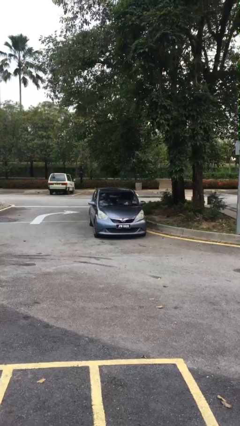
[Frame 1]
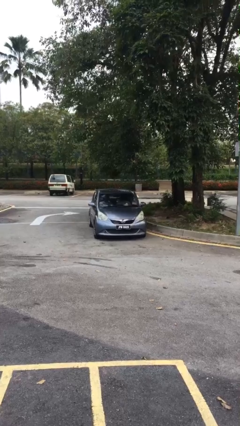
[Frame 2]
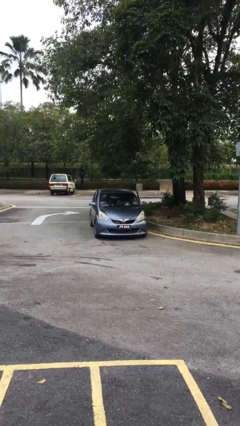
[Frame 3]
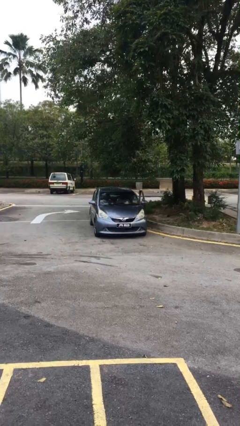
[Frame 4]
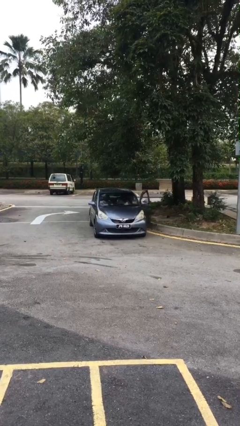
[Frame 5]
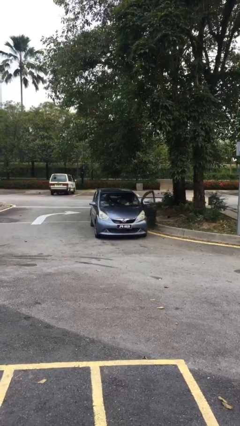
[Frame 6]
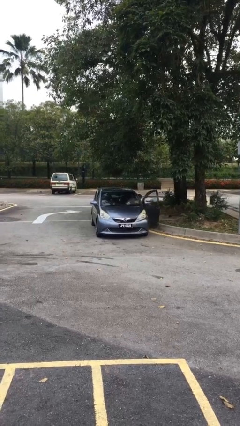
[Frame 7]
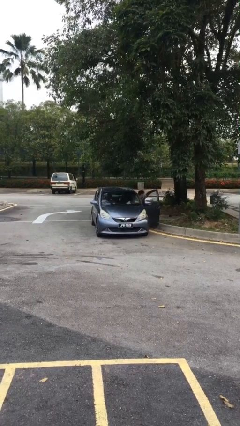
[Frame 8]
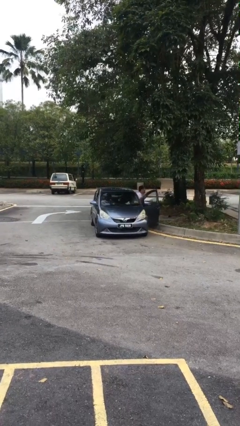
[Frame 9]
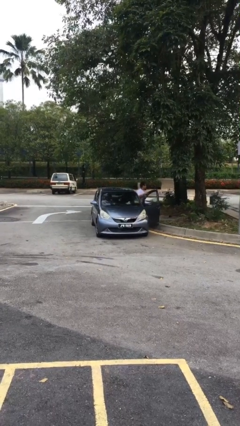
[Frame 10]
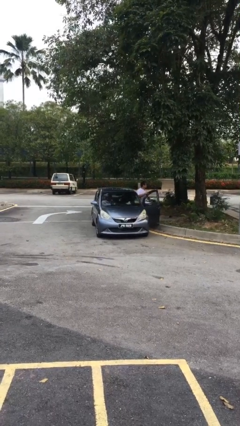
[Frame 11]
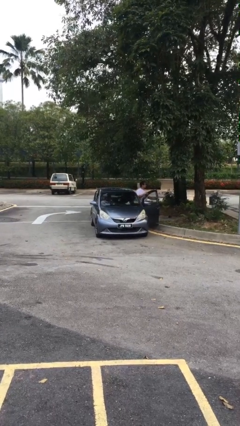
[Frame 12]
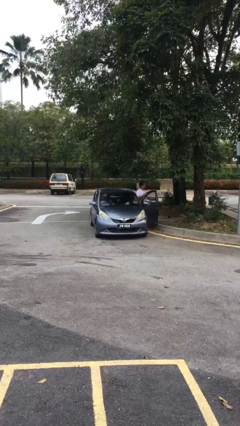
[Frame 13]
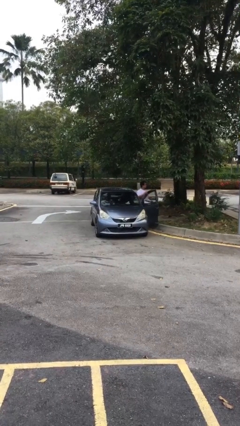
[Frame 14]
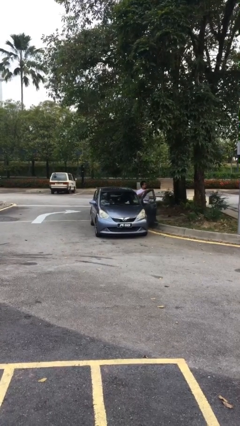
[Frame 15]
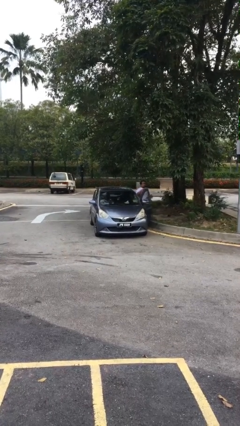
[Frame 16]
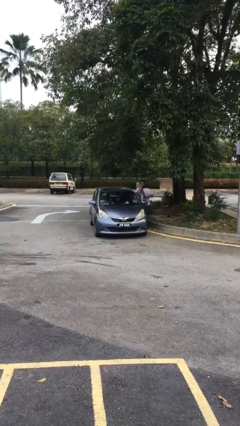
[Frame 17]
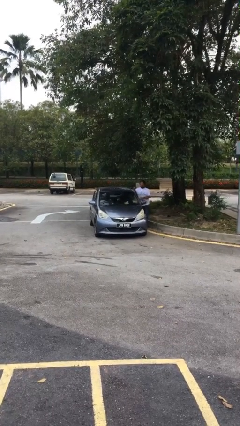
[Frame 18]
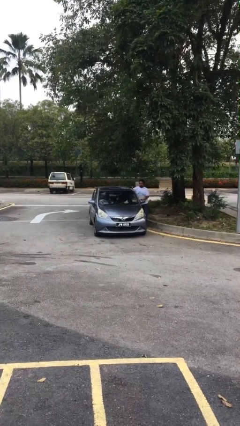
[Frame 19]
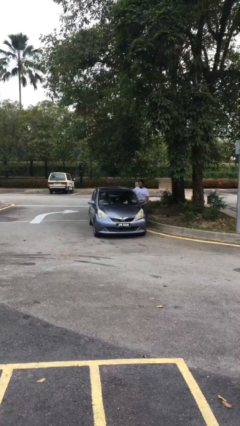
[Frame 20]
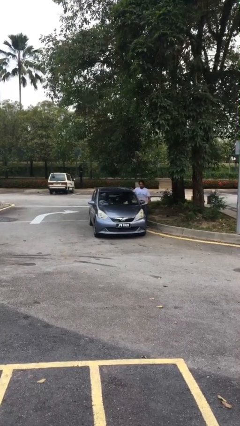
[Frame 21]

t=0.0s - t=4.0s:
car drops off person

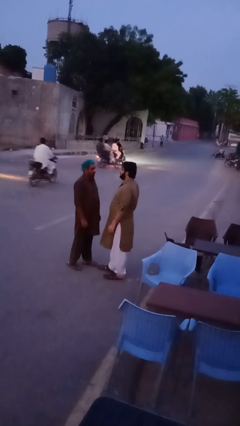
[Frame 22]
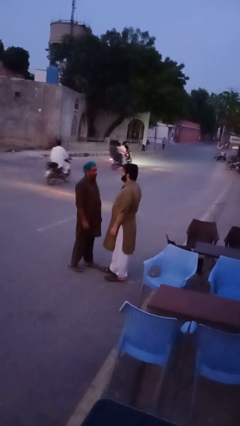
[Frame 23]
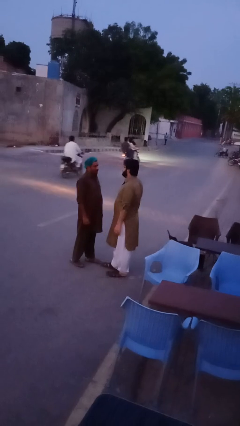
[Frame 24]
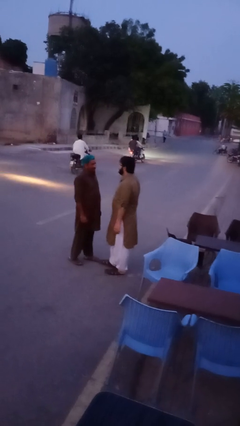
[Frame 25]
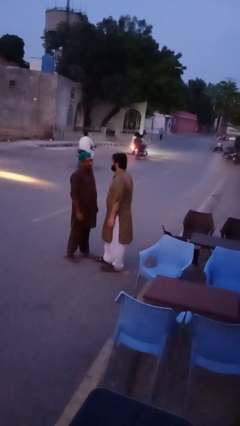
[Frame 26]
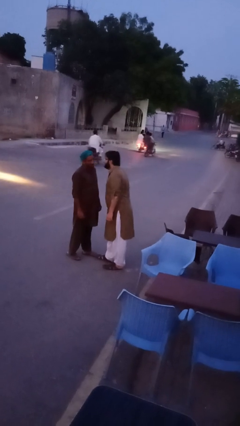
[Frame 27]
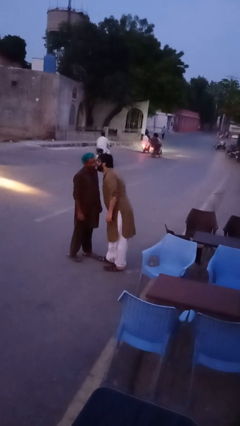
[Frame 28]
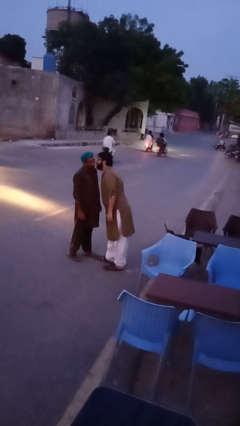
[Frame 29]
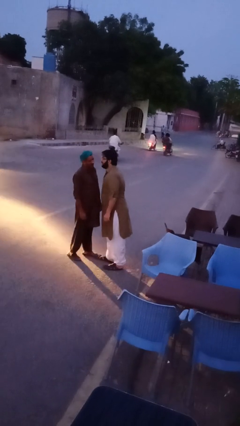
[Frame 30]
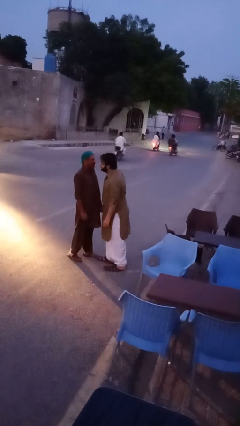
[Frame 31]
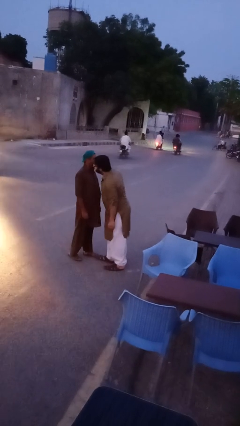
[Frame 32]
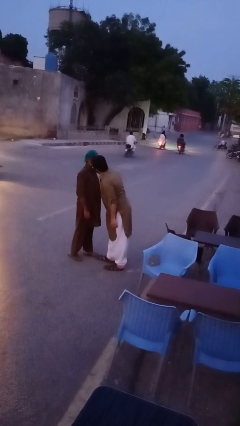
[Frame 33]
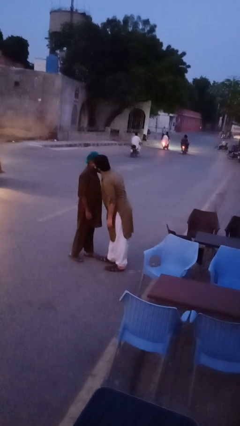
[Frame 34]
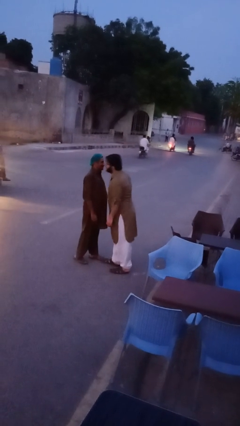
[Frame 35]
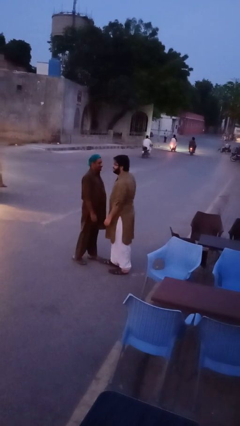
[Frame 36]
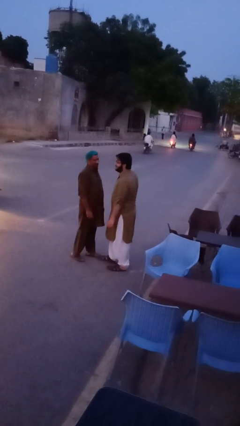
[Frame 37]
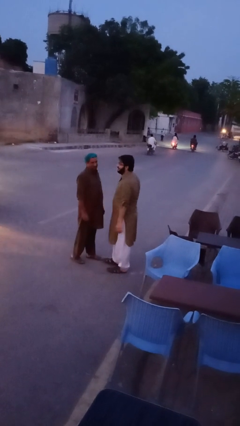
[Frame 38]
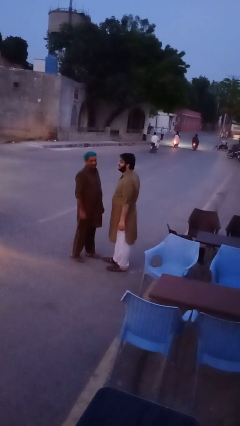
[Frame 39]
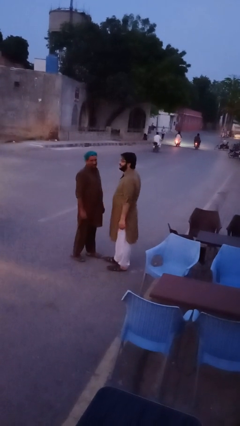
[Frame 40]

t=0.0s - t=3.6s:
person kisses cheek of person

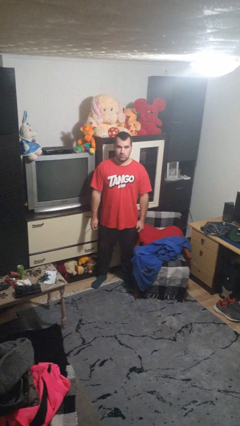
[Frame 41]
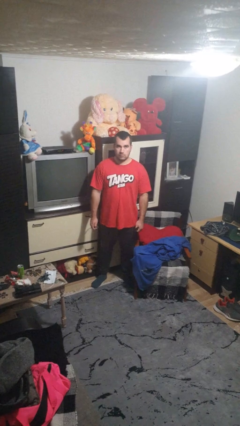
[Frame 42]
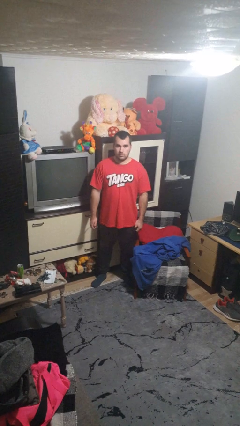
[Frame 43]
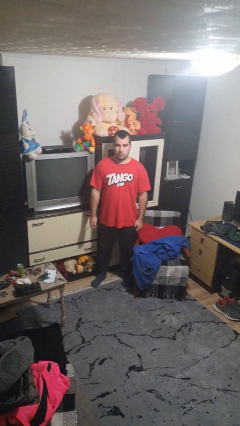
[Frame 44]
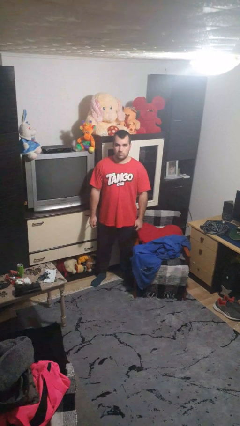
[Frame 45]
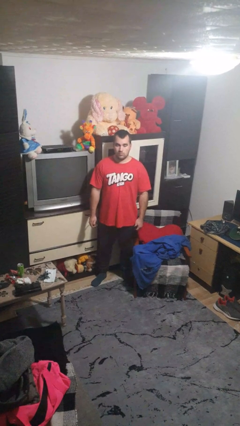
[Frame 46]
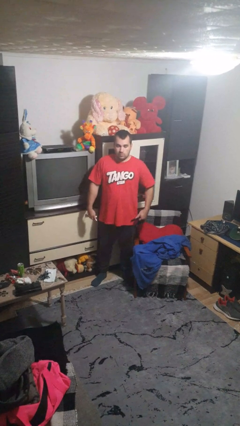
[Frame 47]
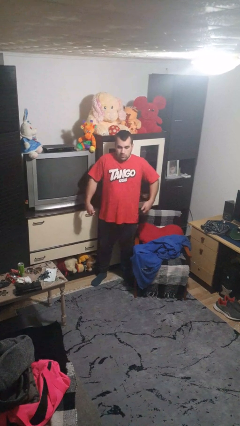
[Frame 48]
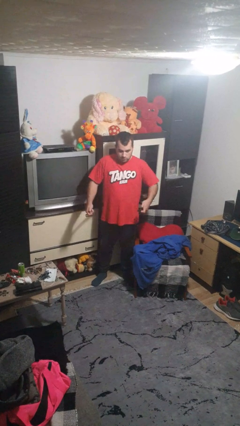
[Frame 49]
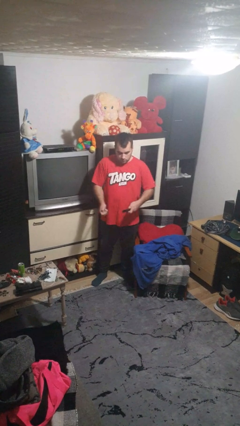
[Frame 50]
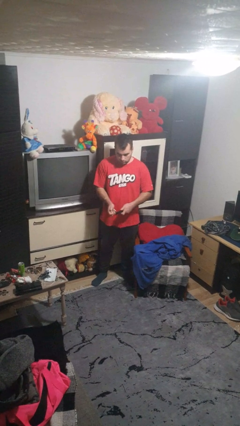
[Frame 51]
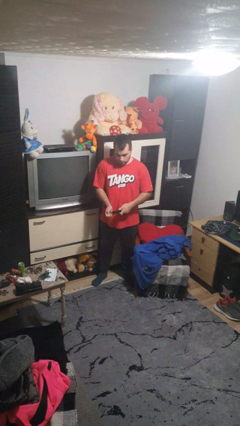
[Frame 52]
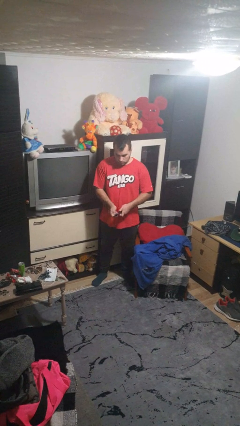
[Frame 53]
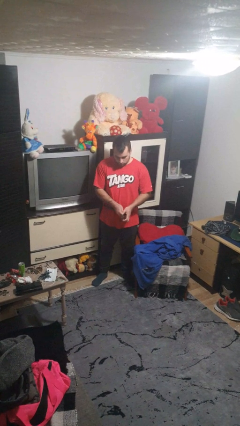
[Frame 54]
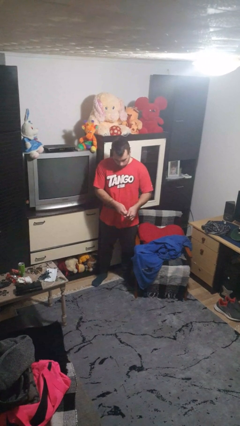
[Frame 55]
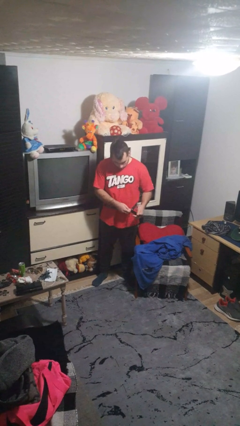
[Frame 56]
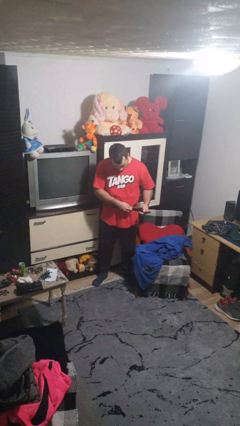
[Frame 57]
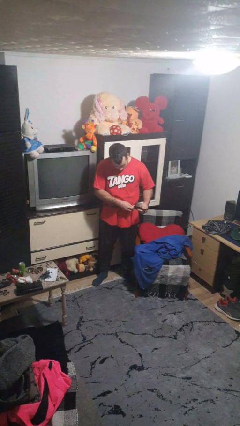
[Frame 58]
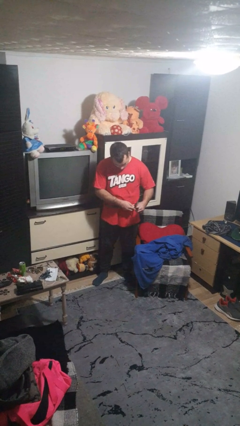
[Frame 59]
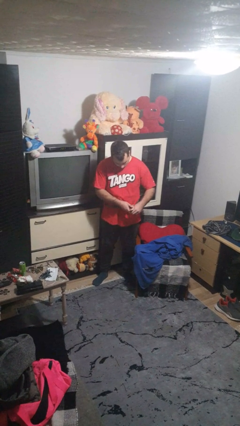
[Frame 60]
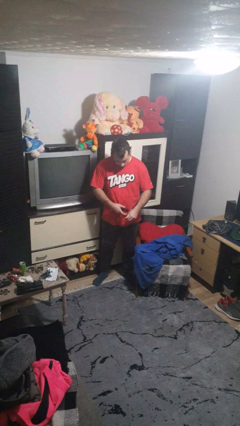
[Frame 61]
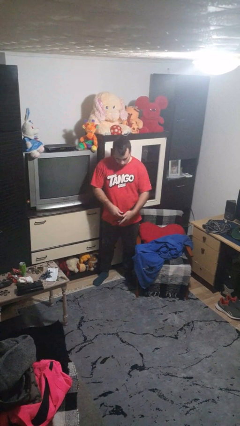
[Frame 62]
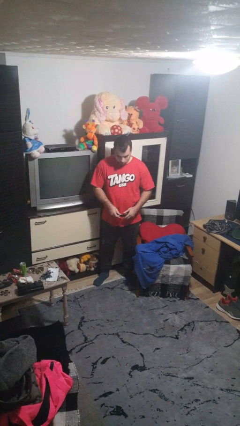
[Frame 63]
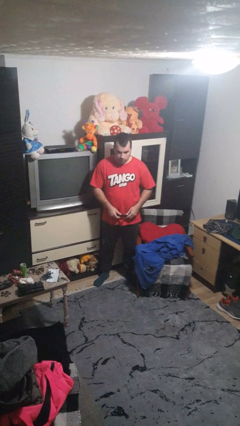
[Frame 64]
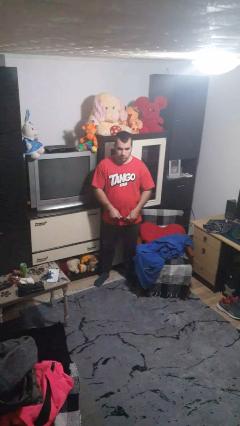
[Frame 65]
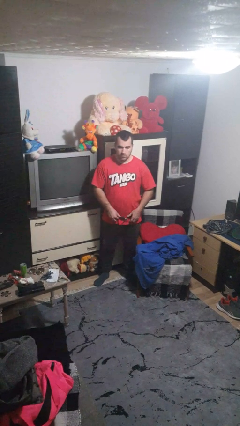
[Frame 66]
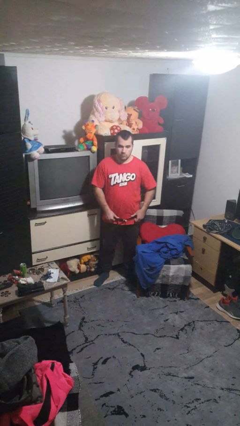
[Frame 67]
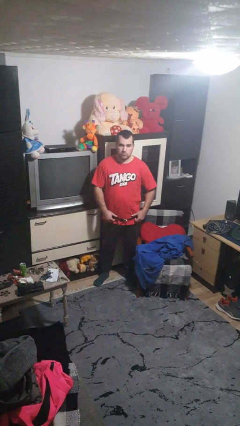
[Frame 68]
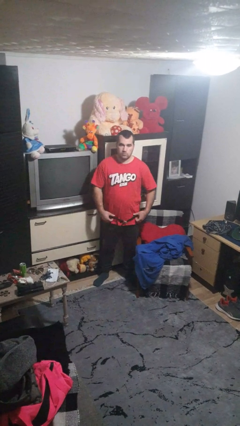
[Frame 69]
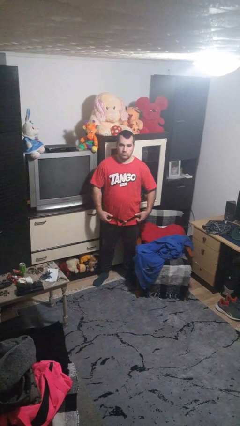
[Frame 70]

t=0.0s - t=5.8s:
person puts on belt

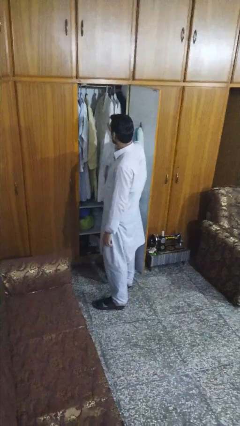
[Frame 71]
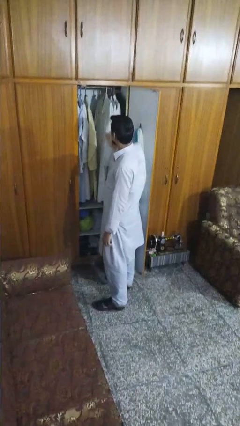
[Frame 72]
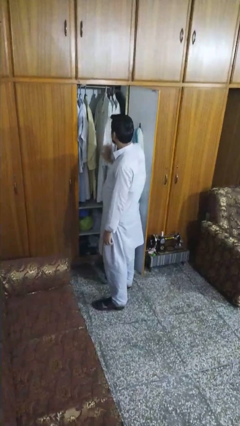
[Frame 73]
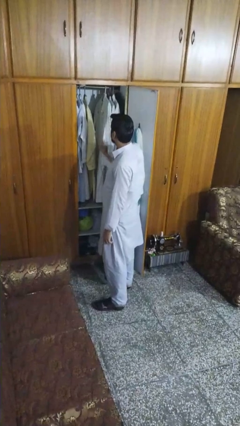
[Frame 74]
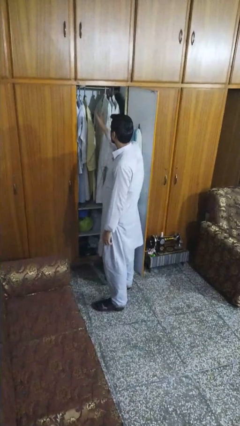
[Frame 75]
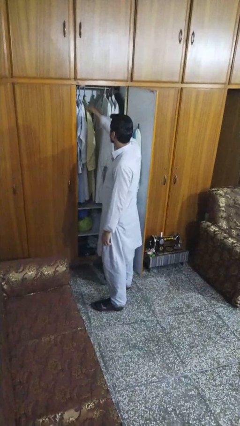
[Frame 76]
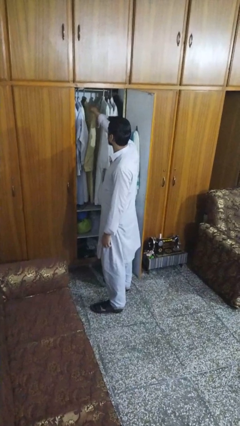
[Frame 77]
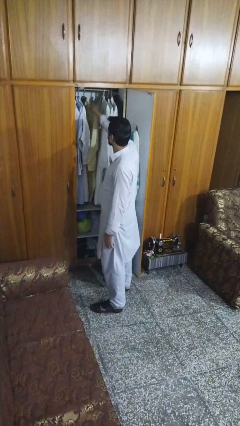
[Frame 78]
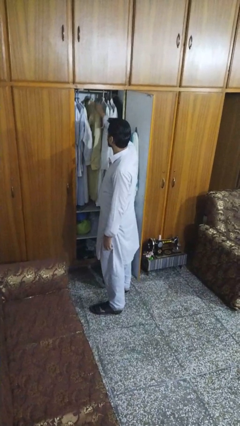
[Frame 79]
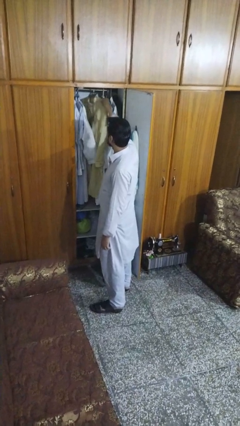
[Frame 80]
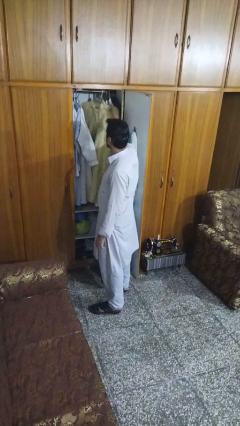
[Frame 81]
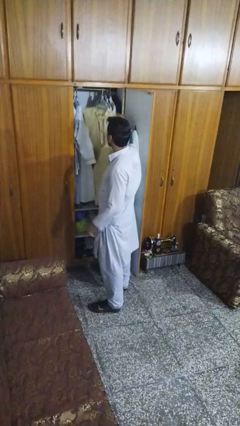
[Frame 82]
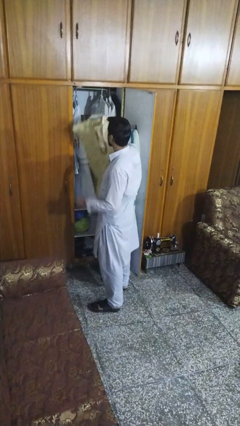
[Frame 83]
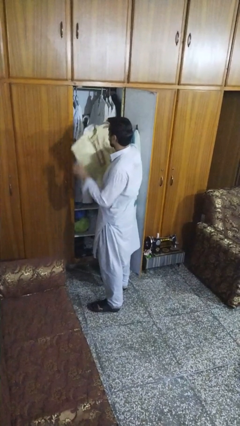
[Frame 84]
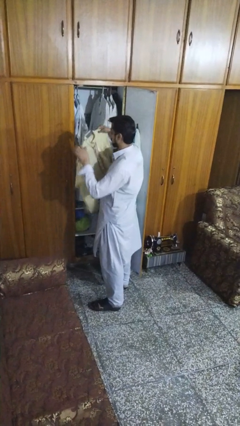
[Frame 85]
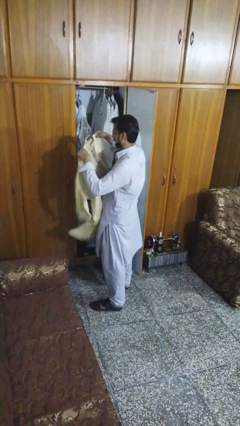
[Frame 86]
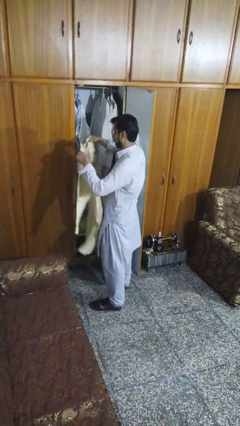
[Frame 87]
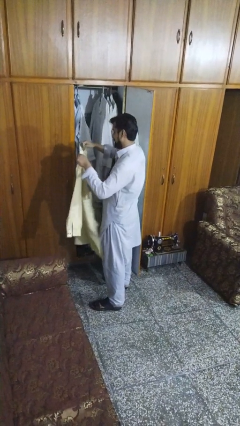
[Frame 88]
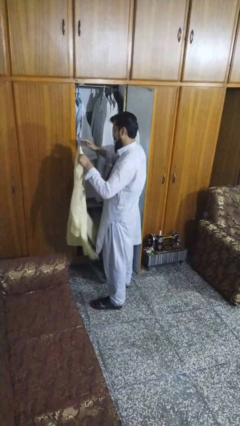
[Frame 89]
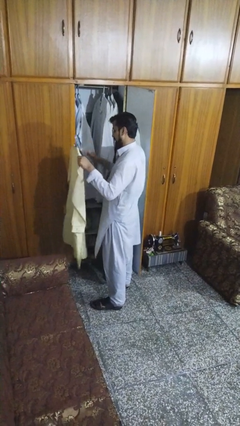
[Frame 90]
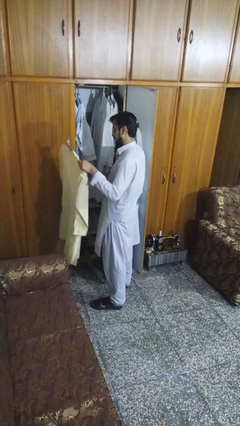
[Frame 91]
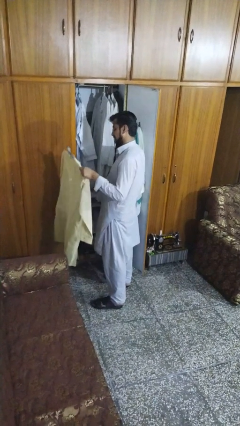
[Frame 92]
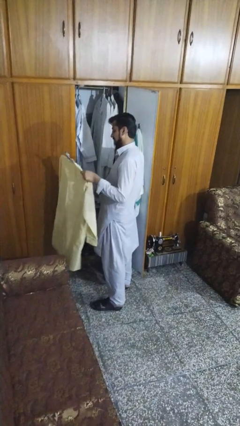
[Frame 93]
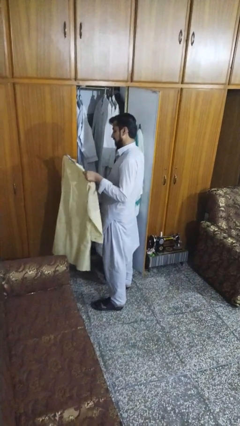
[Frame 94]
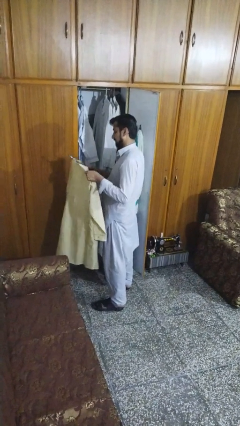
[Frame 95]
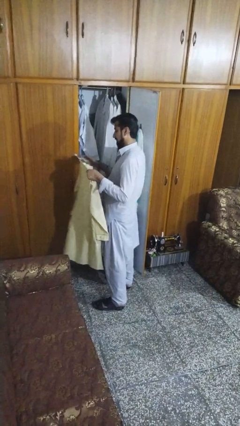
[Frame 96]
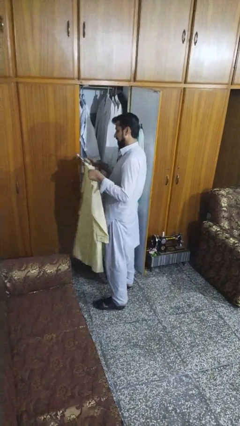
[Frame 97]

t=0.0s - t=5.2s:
person takes clothes from dresser
